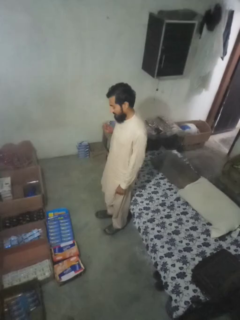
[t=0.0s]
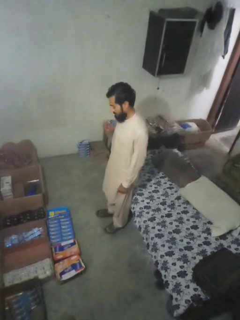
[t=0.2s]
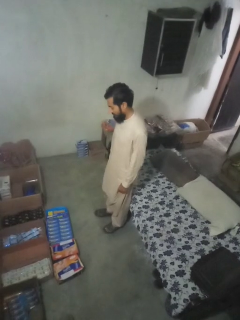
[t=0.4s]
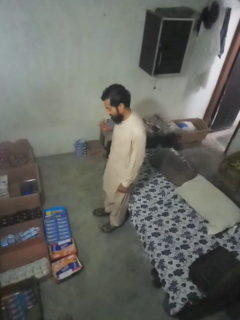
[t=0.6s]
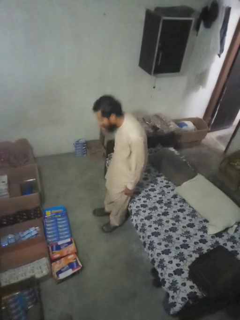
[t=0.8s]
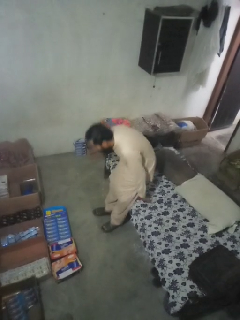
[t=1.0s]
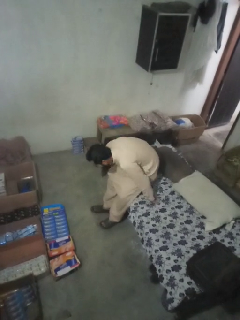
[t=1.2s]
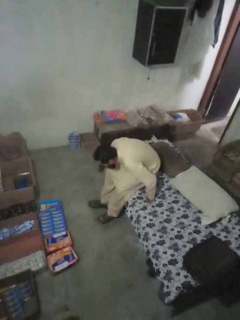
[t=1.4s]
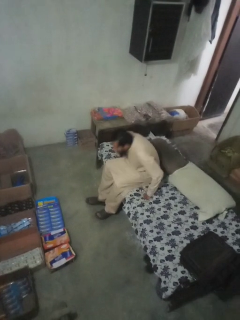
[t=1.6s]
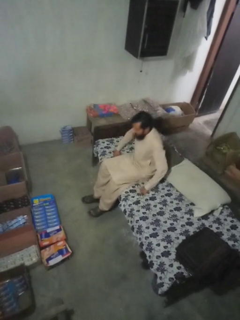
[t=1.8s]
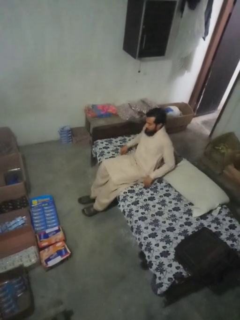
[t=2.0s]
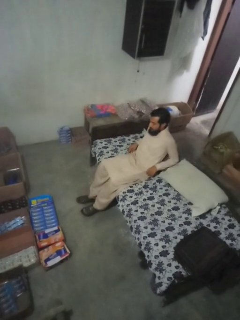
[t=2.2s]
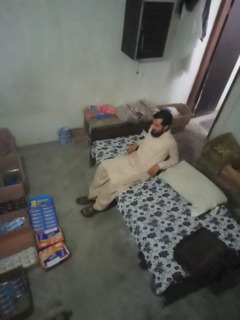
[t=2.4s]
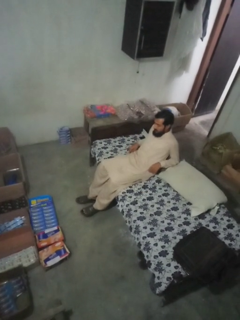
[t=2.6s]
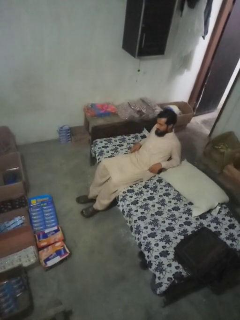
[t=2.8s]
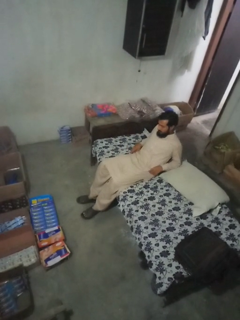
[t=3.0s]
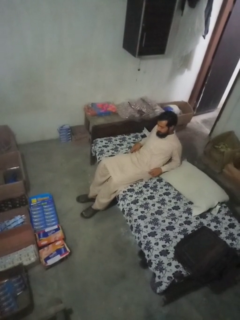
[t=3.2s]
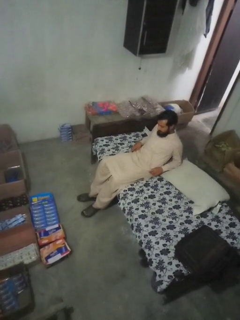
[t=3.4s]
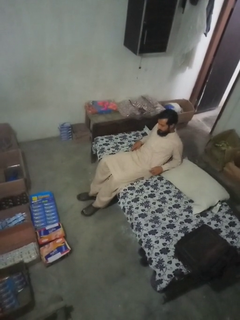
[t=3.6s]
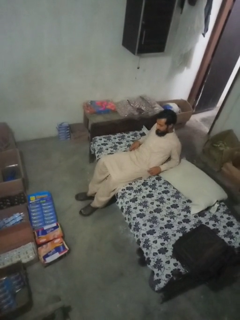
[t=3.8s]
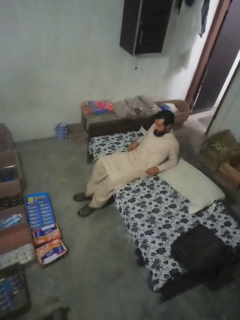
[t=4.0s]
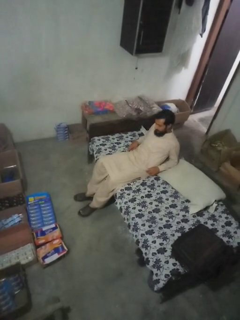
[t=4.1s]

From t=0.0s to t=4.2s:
person lies down on couch

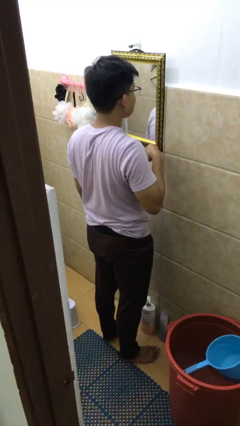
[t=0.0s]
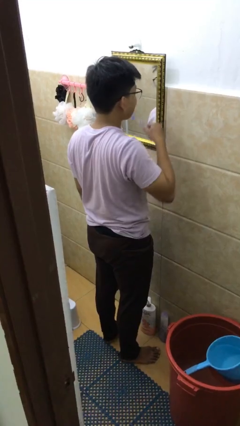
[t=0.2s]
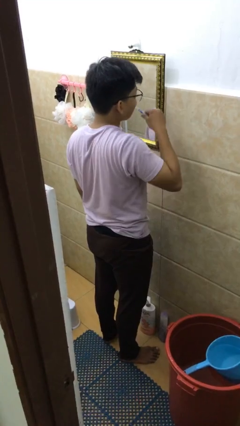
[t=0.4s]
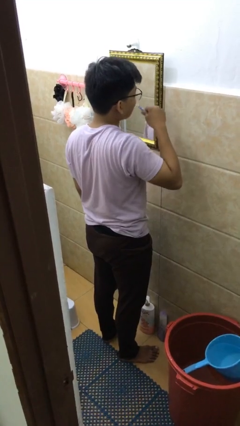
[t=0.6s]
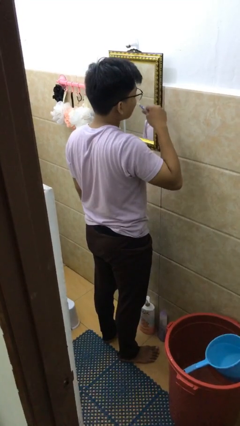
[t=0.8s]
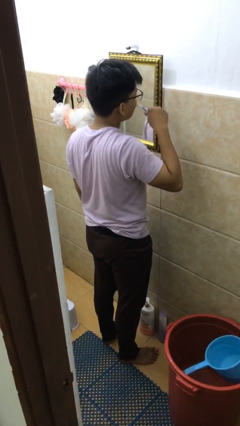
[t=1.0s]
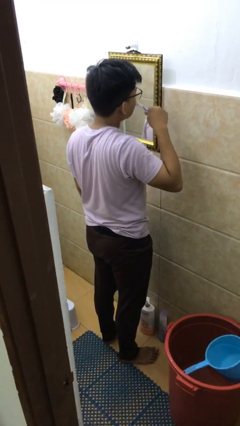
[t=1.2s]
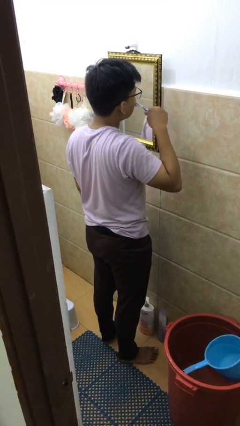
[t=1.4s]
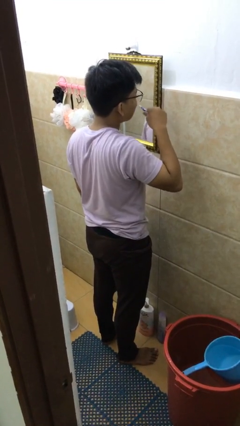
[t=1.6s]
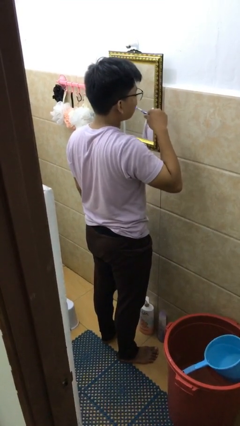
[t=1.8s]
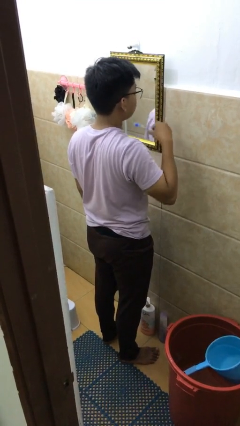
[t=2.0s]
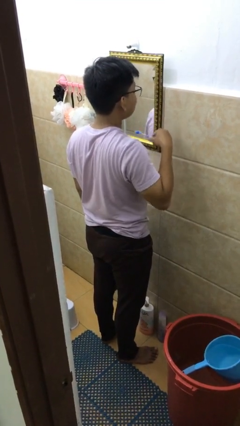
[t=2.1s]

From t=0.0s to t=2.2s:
person brushes teeth

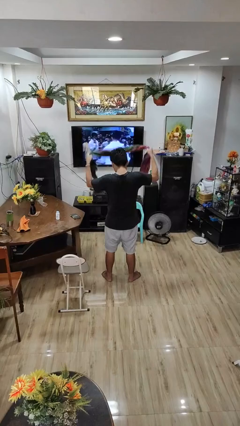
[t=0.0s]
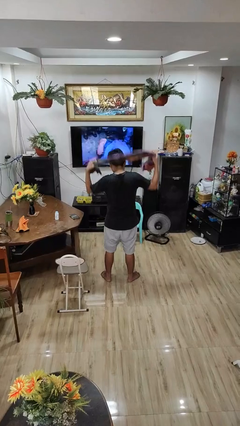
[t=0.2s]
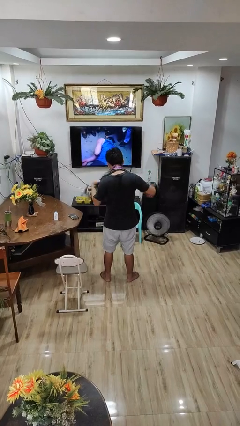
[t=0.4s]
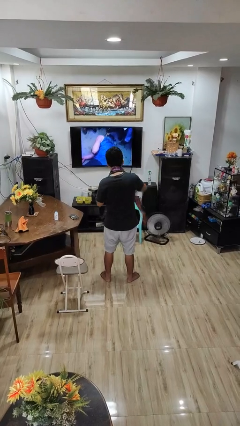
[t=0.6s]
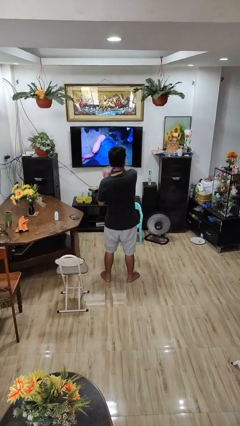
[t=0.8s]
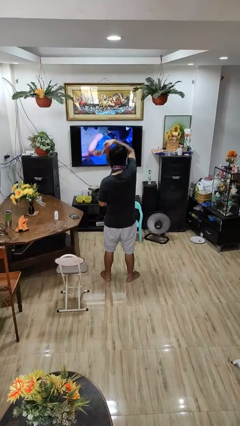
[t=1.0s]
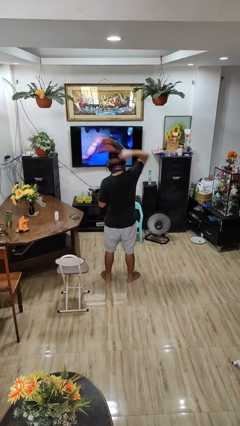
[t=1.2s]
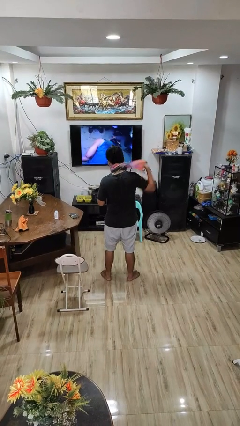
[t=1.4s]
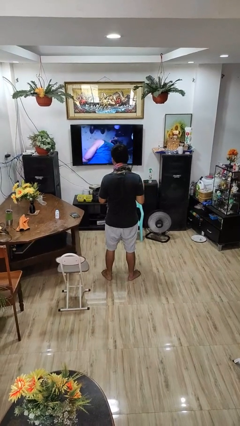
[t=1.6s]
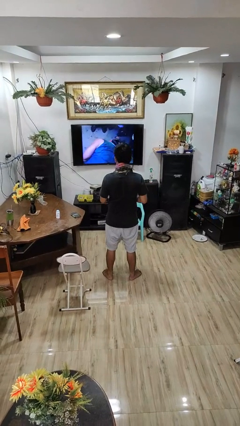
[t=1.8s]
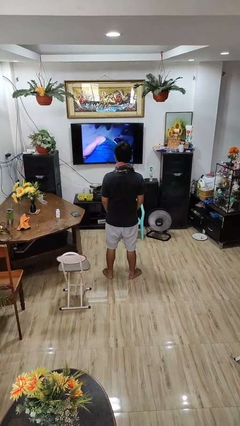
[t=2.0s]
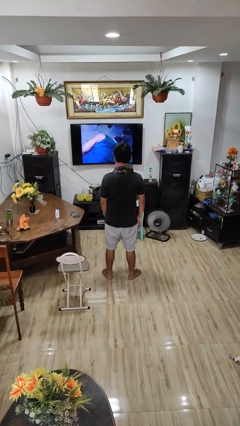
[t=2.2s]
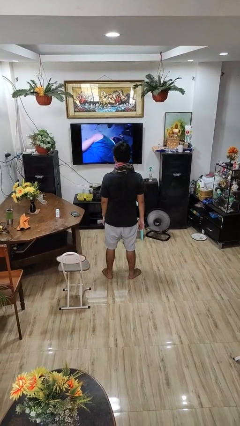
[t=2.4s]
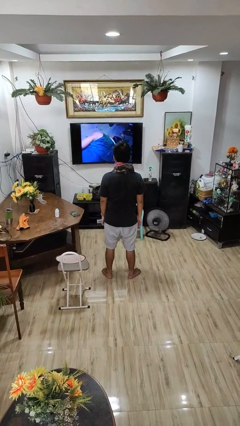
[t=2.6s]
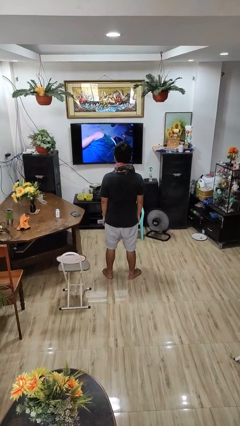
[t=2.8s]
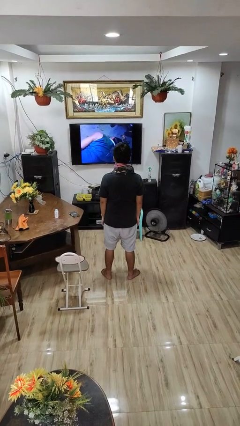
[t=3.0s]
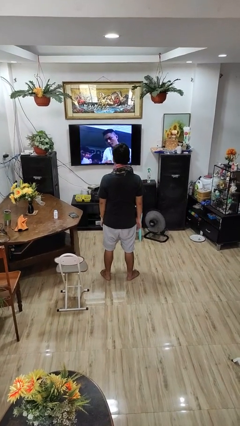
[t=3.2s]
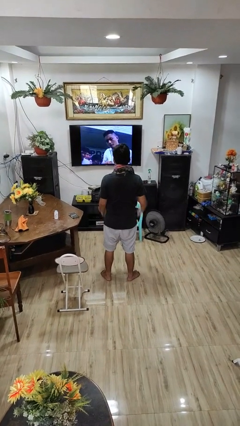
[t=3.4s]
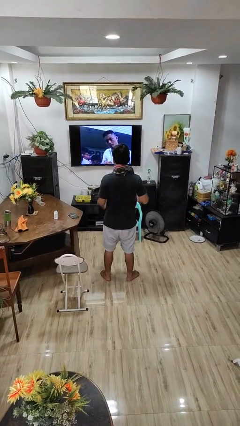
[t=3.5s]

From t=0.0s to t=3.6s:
person puts on scarf

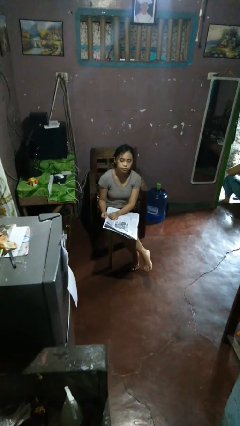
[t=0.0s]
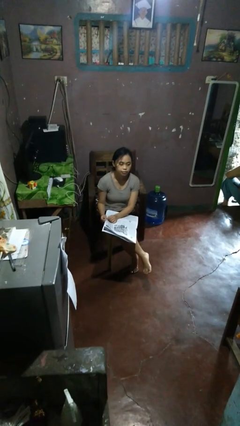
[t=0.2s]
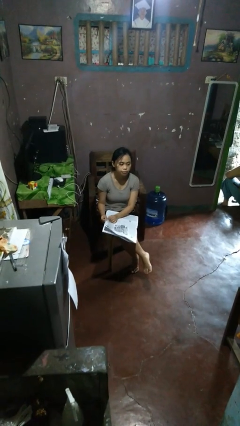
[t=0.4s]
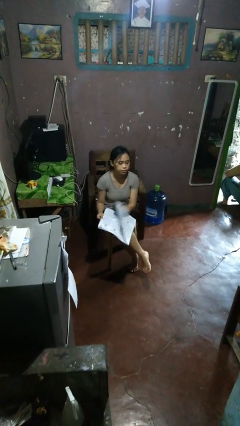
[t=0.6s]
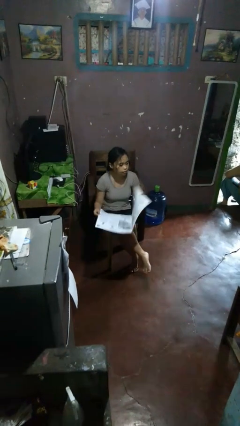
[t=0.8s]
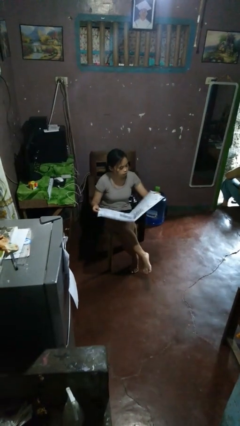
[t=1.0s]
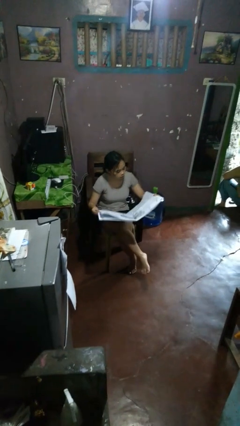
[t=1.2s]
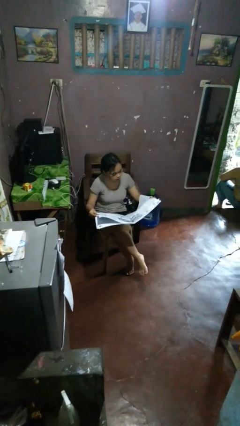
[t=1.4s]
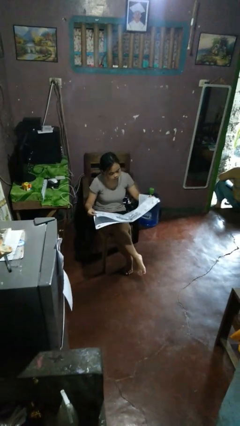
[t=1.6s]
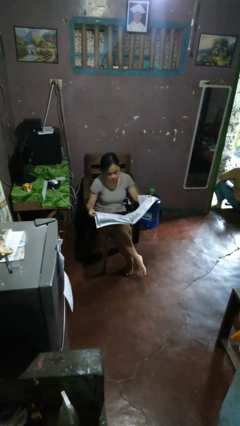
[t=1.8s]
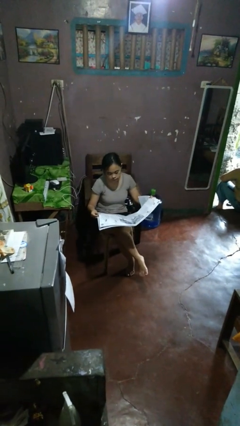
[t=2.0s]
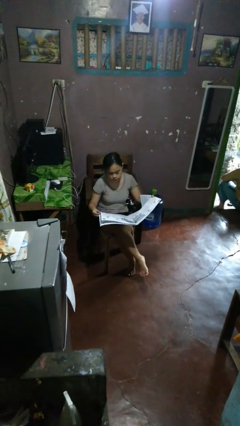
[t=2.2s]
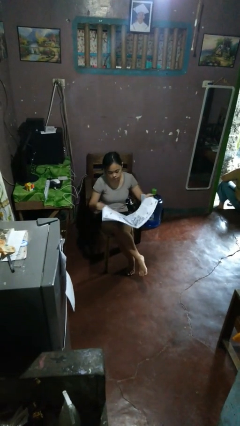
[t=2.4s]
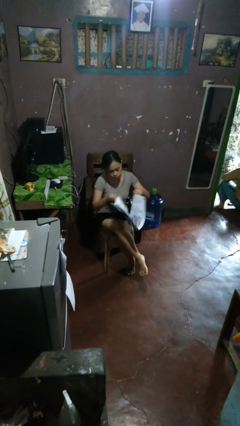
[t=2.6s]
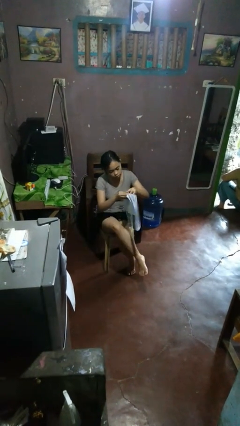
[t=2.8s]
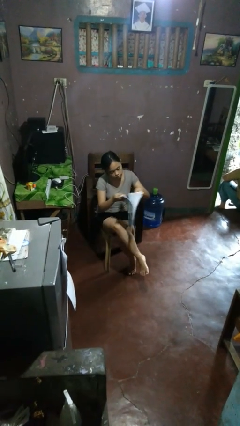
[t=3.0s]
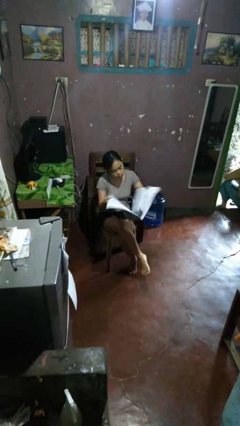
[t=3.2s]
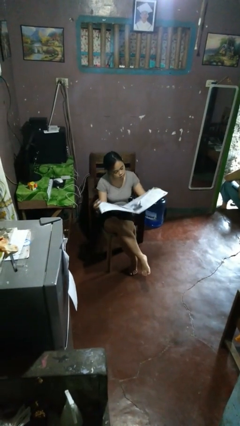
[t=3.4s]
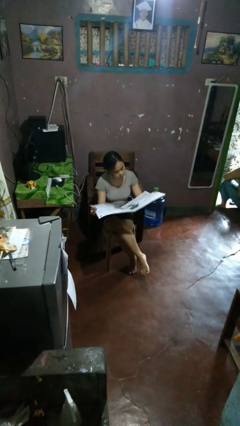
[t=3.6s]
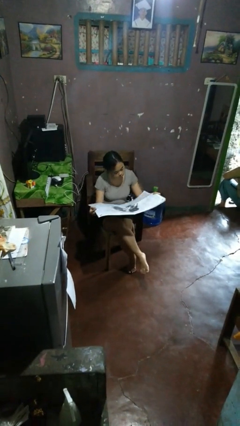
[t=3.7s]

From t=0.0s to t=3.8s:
person reads newspaper

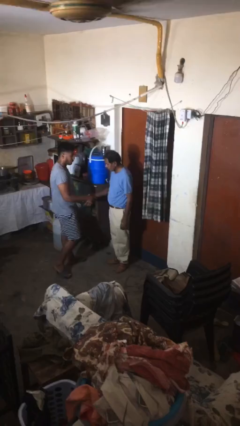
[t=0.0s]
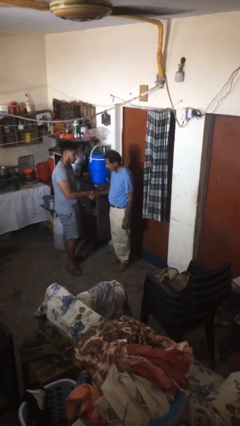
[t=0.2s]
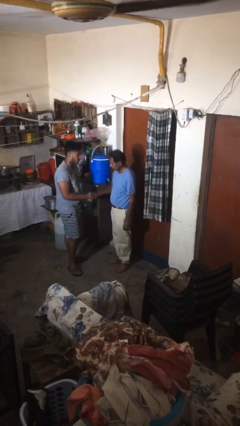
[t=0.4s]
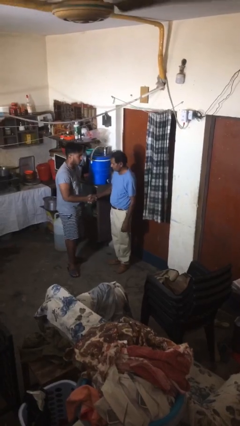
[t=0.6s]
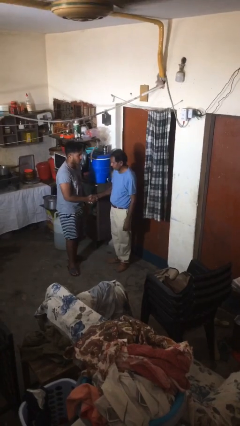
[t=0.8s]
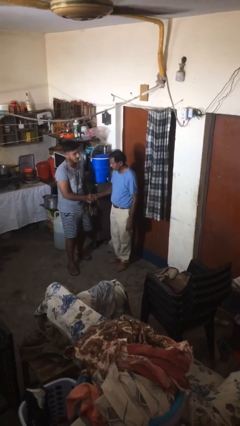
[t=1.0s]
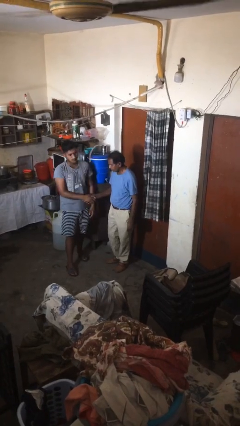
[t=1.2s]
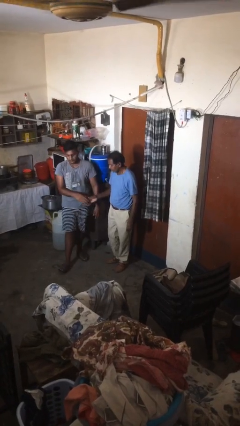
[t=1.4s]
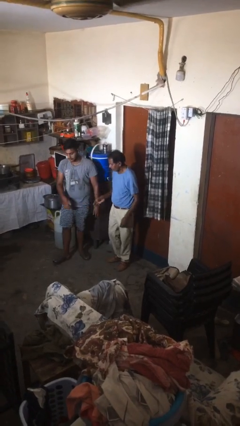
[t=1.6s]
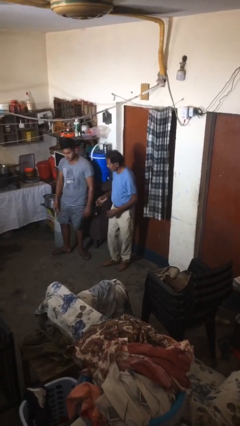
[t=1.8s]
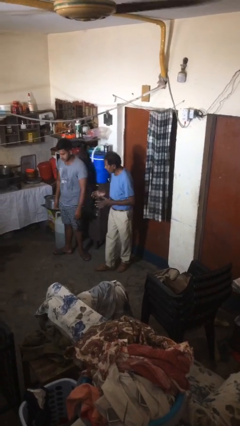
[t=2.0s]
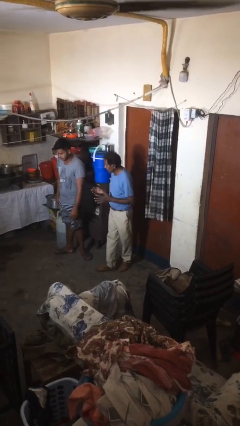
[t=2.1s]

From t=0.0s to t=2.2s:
person shakes hand

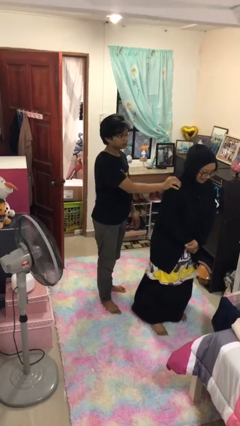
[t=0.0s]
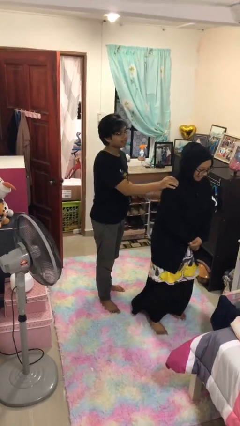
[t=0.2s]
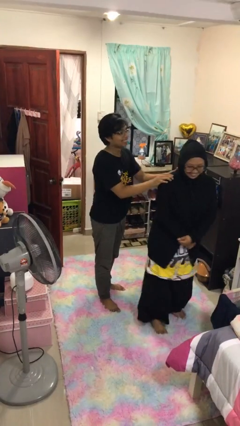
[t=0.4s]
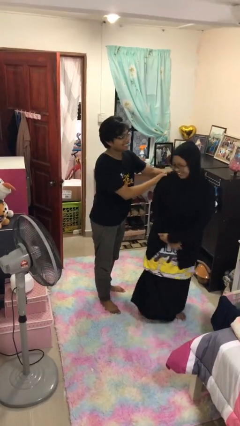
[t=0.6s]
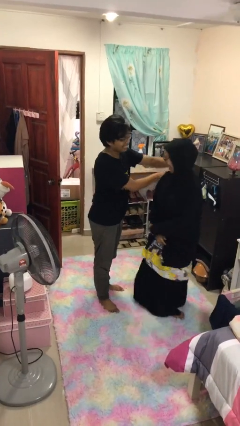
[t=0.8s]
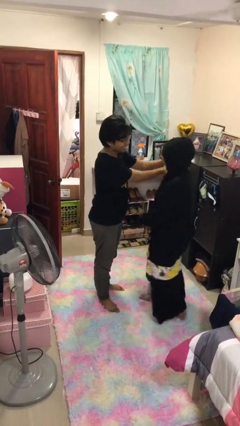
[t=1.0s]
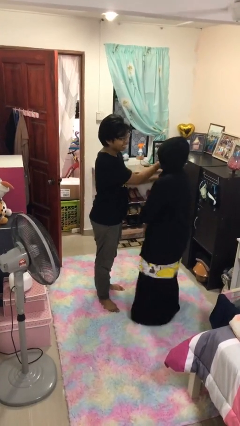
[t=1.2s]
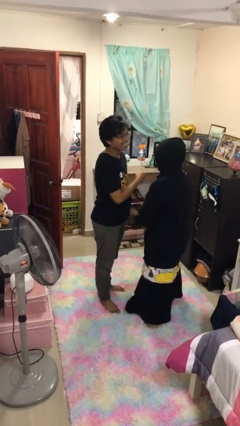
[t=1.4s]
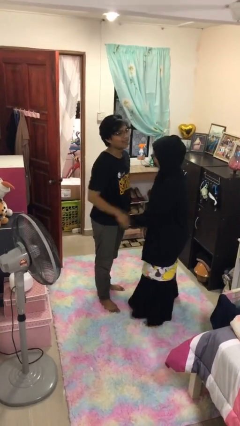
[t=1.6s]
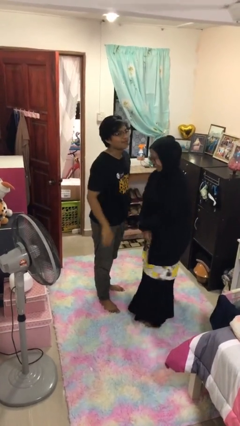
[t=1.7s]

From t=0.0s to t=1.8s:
person spins person around

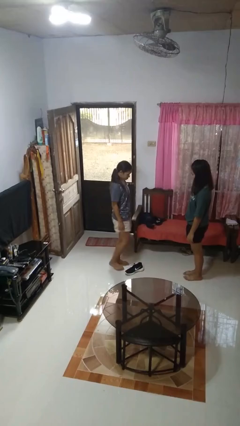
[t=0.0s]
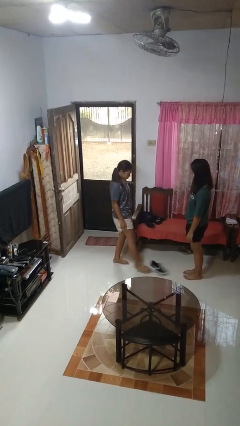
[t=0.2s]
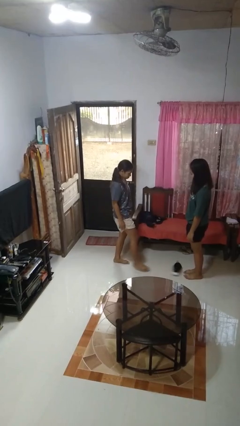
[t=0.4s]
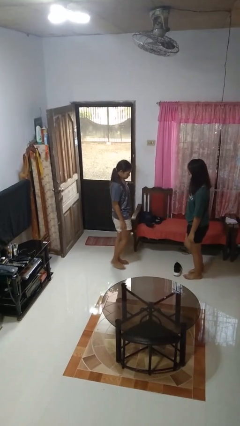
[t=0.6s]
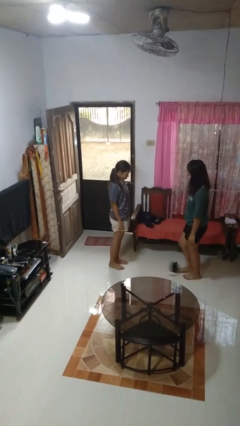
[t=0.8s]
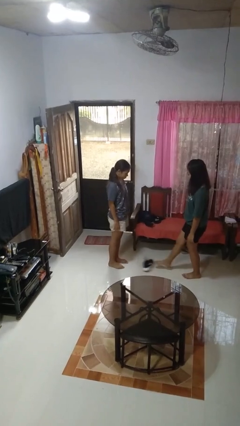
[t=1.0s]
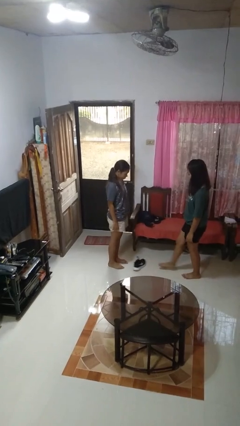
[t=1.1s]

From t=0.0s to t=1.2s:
person kicks object to person
